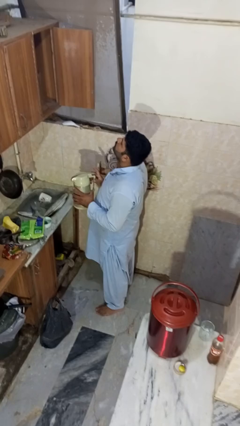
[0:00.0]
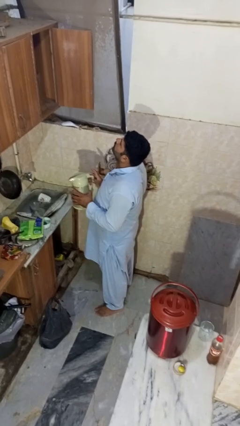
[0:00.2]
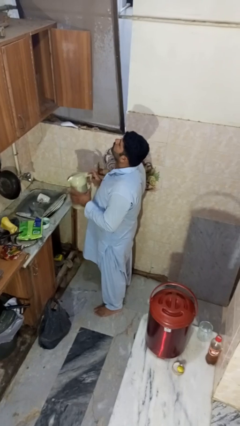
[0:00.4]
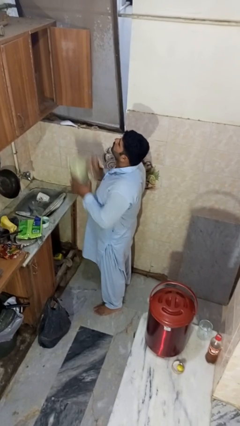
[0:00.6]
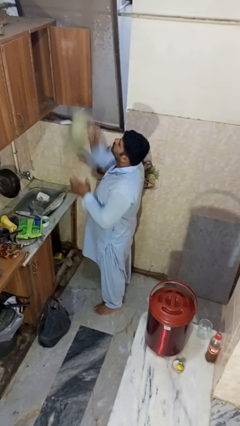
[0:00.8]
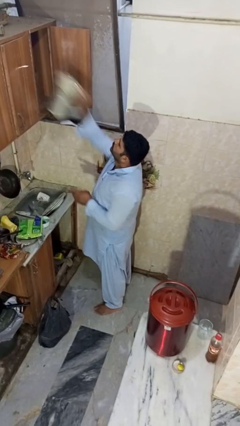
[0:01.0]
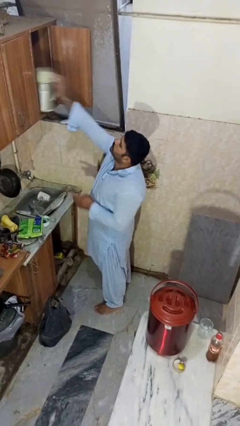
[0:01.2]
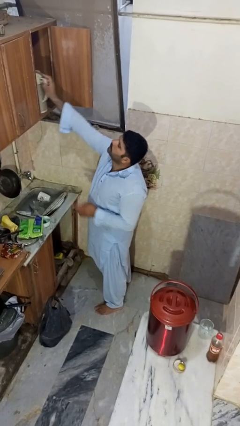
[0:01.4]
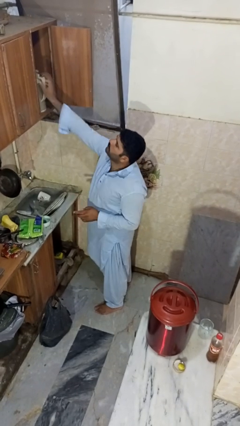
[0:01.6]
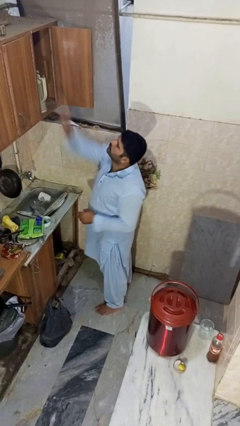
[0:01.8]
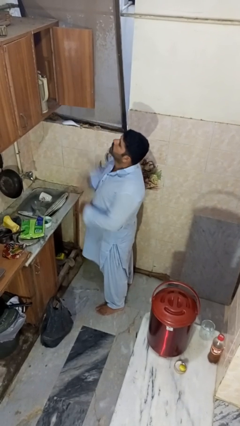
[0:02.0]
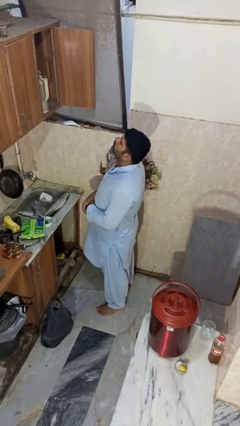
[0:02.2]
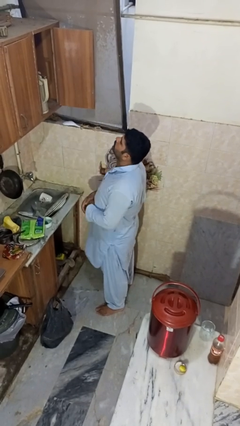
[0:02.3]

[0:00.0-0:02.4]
person puts object in cabinet

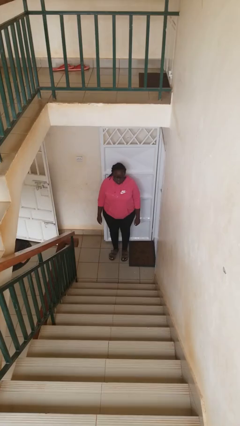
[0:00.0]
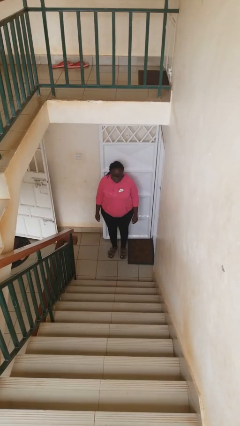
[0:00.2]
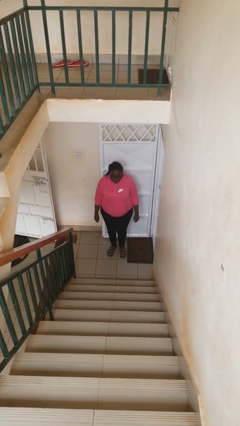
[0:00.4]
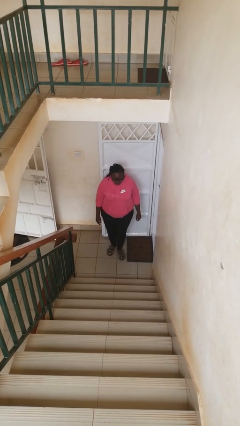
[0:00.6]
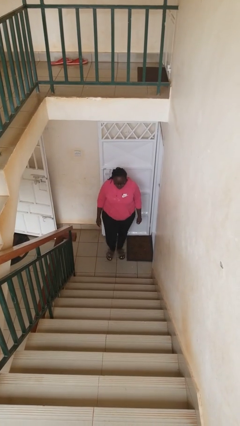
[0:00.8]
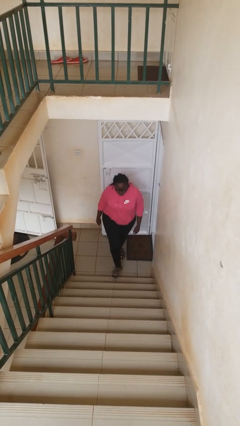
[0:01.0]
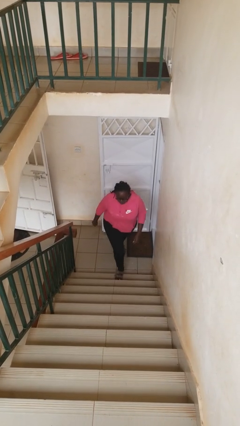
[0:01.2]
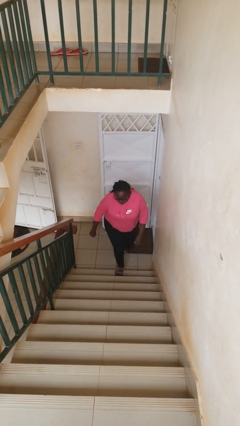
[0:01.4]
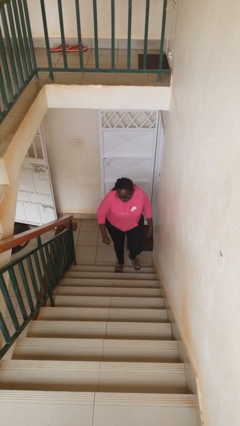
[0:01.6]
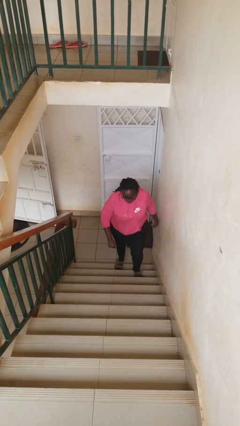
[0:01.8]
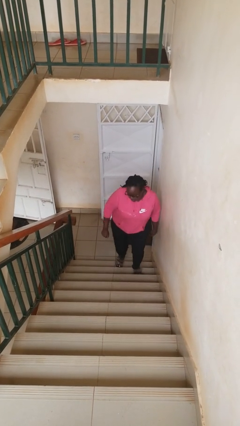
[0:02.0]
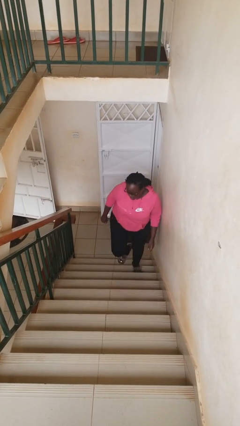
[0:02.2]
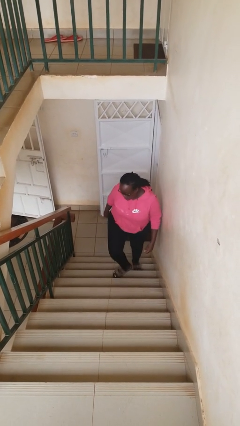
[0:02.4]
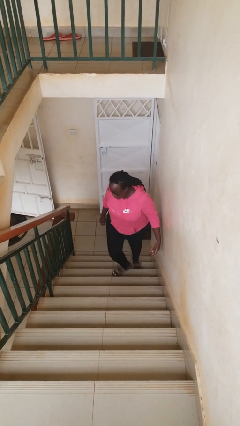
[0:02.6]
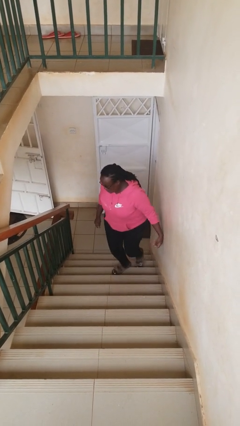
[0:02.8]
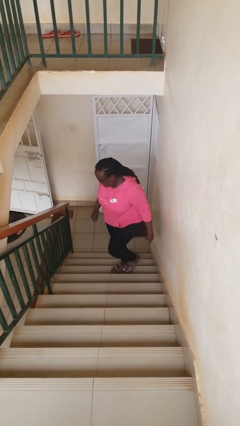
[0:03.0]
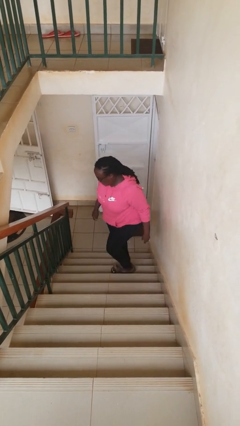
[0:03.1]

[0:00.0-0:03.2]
person climbs up stairs

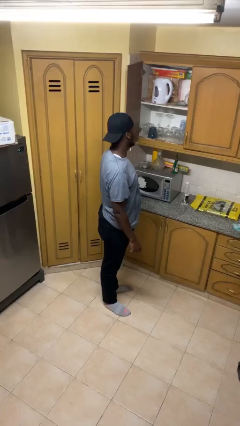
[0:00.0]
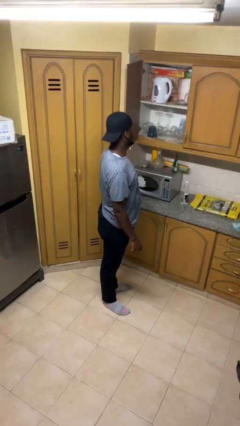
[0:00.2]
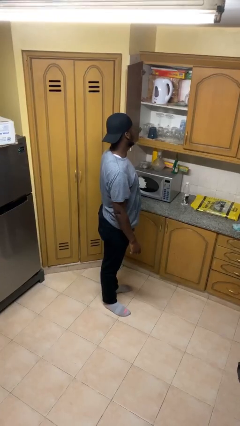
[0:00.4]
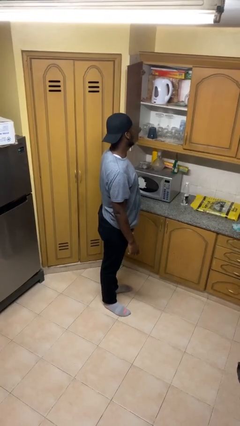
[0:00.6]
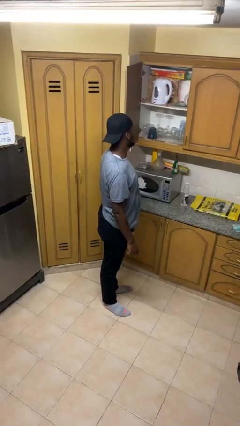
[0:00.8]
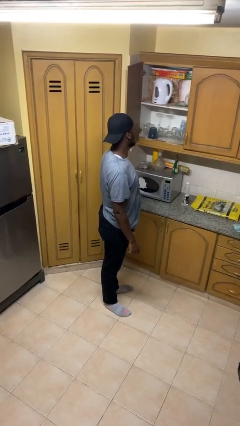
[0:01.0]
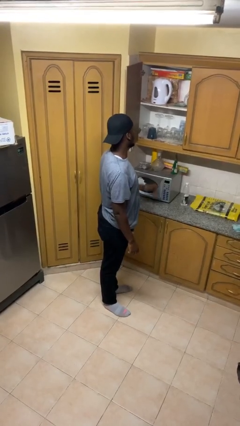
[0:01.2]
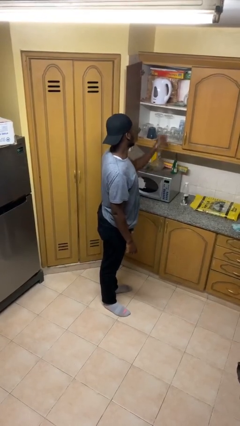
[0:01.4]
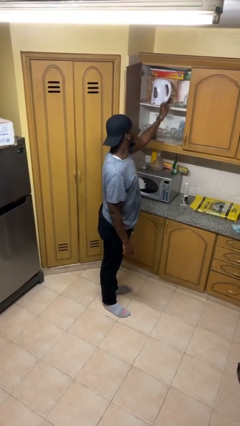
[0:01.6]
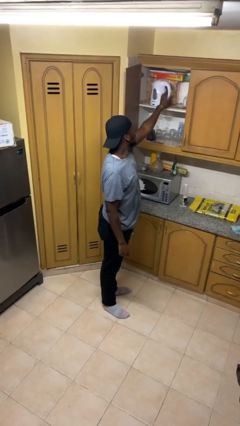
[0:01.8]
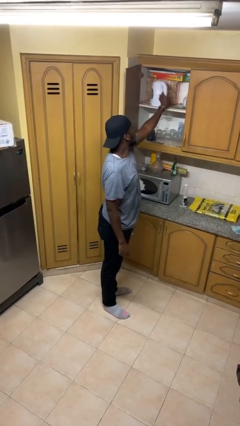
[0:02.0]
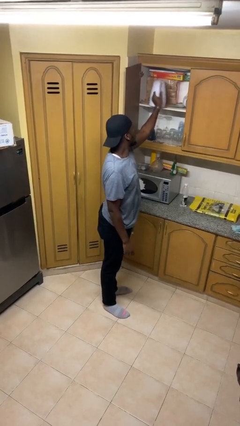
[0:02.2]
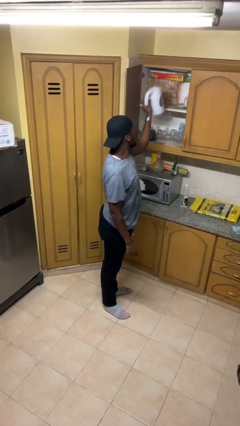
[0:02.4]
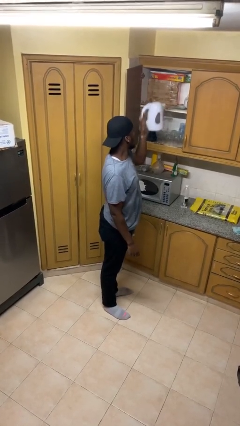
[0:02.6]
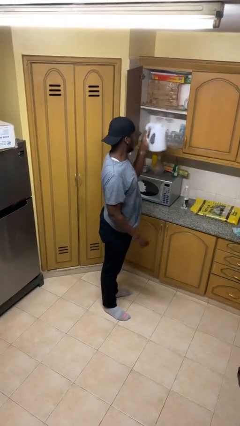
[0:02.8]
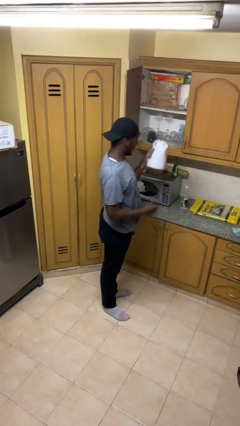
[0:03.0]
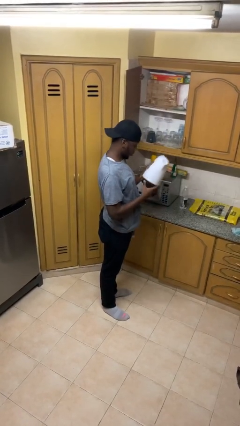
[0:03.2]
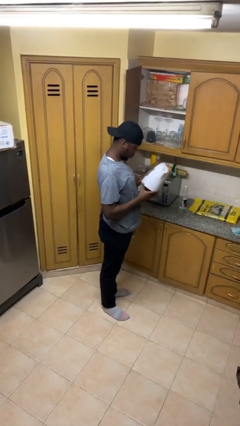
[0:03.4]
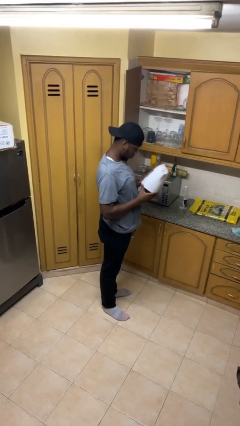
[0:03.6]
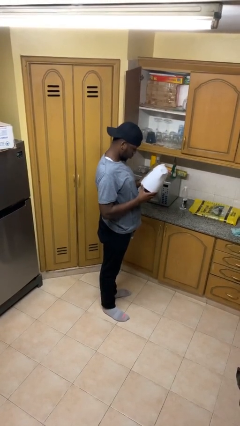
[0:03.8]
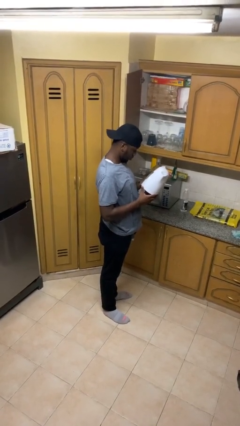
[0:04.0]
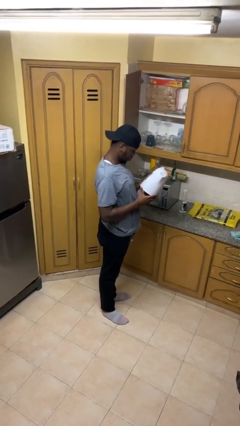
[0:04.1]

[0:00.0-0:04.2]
person picks up object from shelf

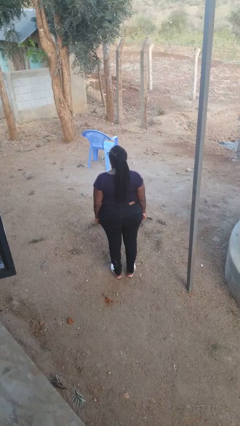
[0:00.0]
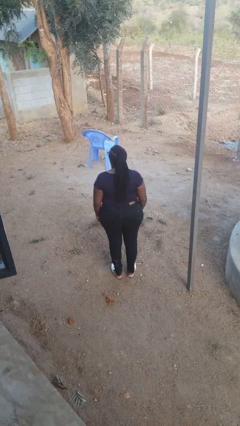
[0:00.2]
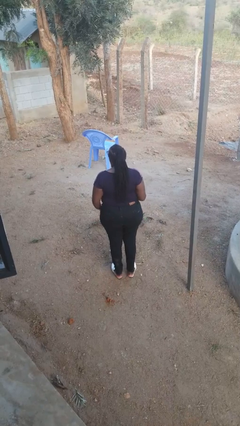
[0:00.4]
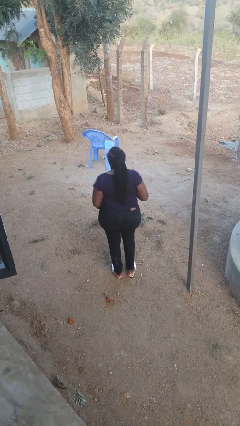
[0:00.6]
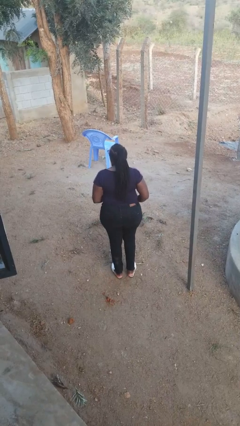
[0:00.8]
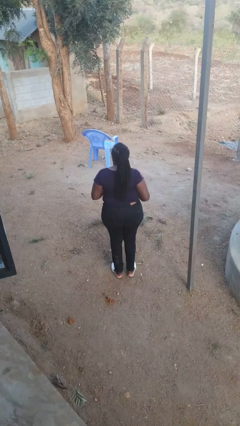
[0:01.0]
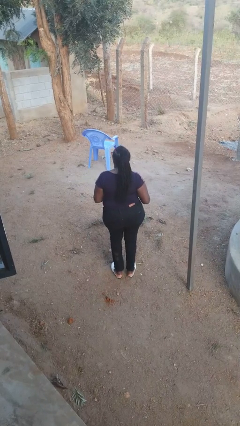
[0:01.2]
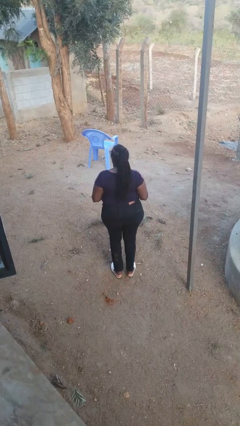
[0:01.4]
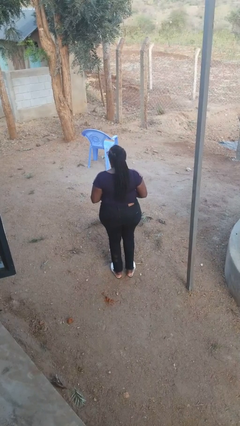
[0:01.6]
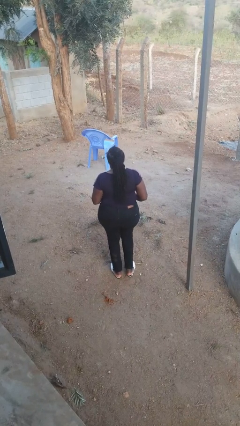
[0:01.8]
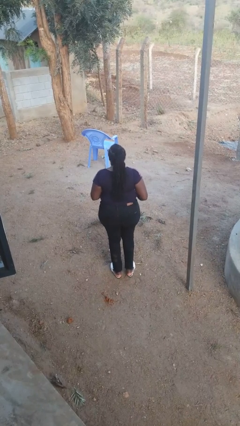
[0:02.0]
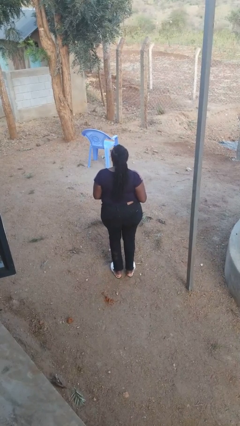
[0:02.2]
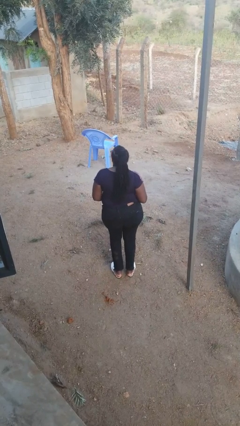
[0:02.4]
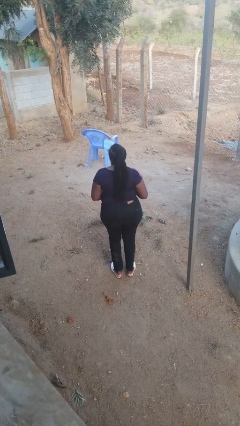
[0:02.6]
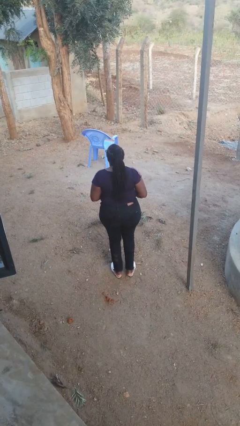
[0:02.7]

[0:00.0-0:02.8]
person wiggles hips

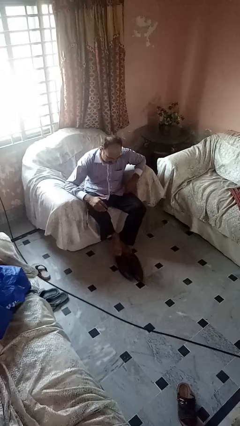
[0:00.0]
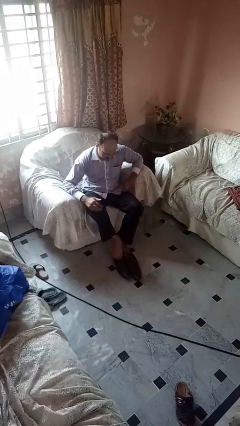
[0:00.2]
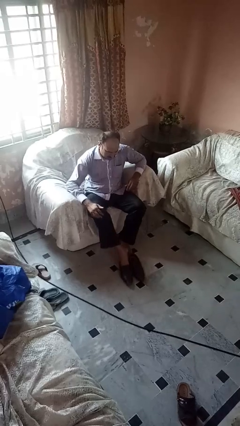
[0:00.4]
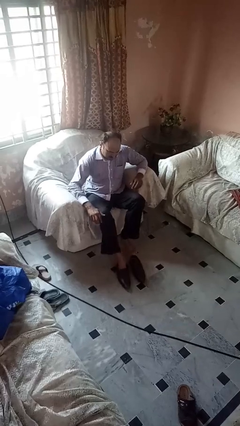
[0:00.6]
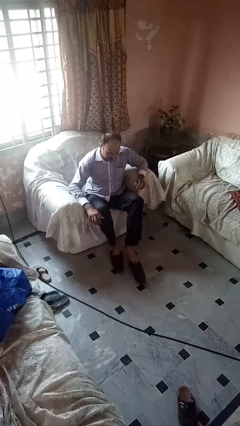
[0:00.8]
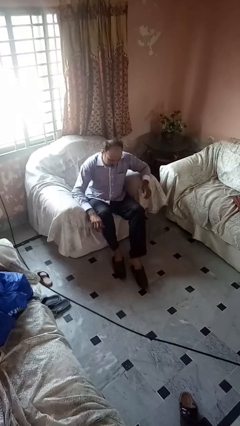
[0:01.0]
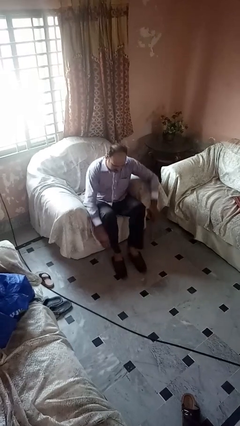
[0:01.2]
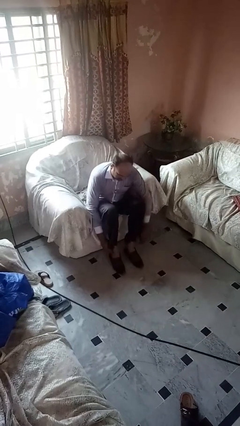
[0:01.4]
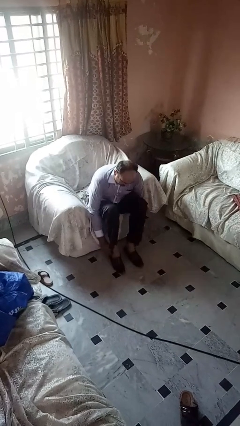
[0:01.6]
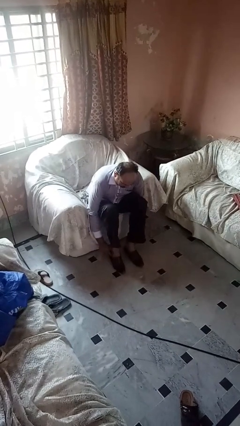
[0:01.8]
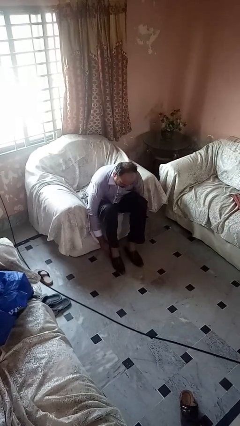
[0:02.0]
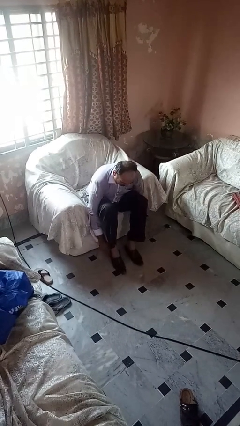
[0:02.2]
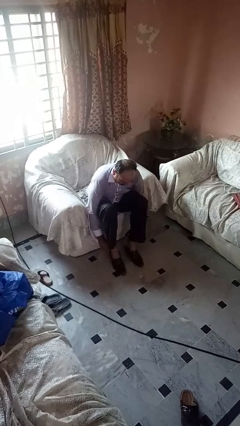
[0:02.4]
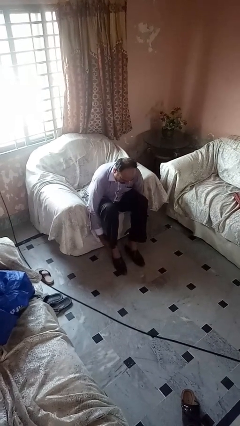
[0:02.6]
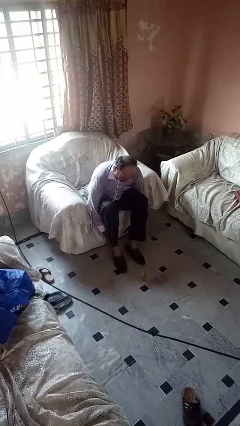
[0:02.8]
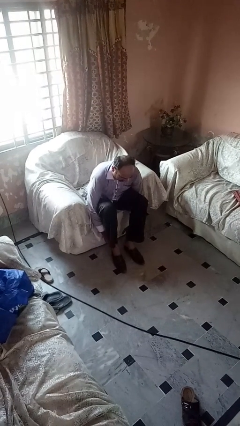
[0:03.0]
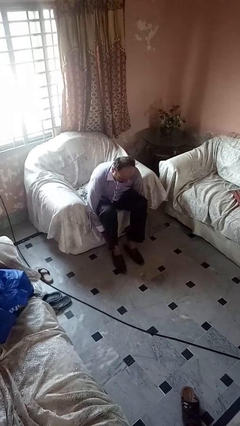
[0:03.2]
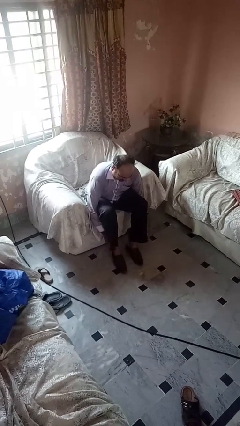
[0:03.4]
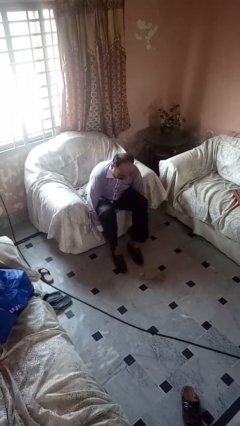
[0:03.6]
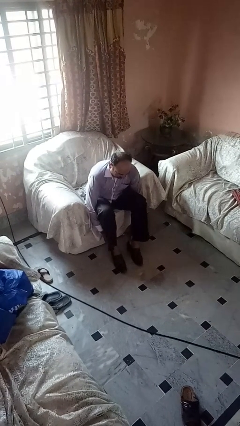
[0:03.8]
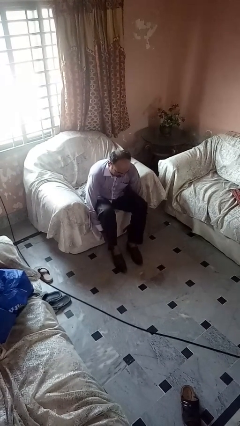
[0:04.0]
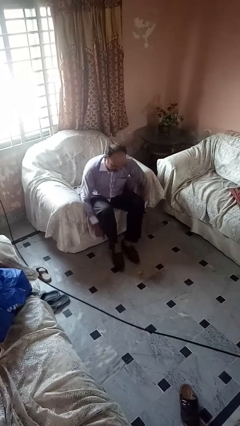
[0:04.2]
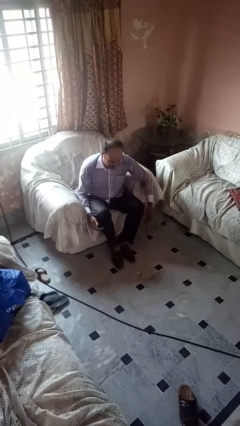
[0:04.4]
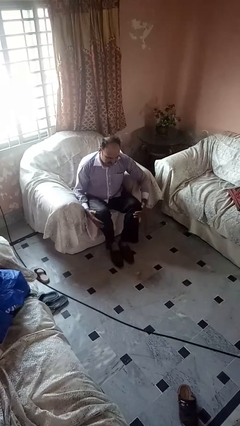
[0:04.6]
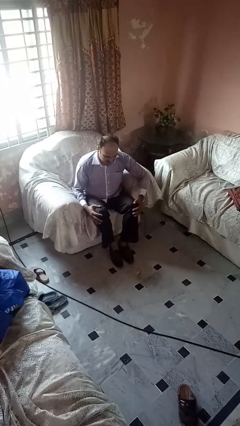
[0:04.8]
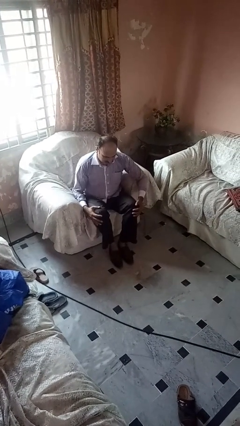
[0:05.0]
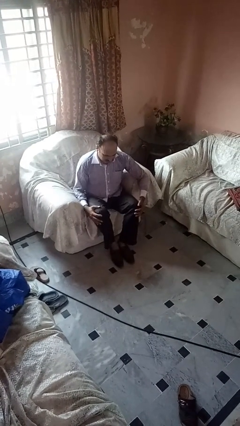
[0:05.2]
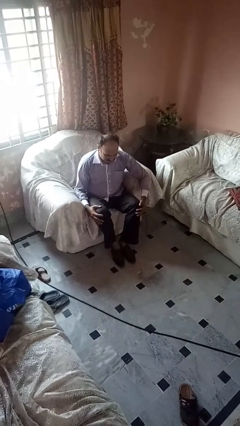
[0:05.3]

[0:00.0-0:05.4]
person puts on boots
